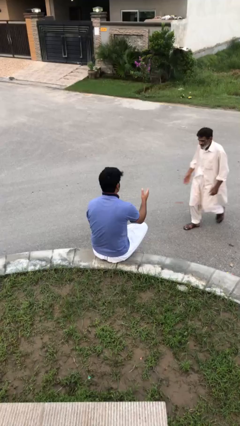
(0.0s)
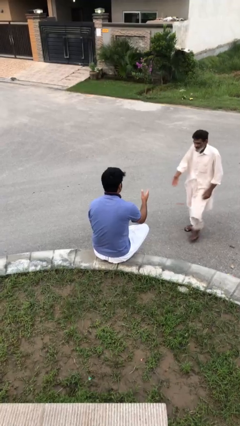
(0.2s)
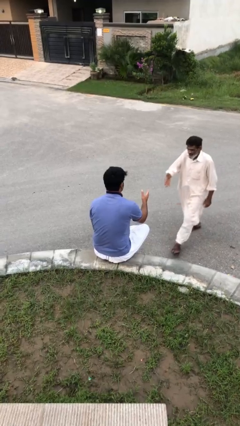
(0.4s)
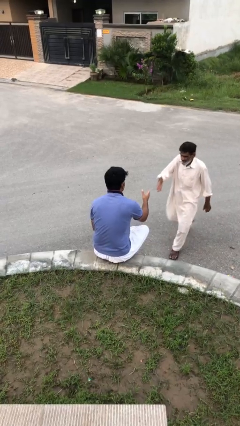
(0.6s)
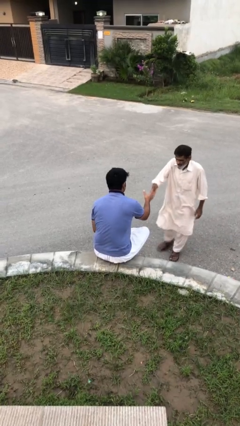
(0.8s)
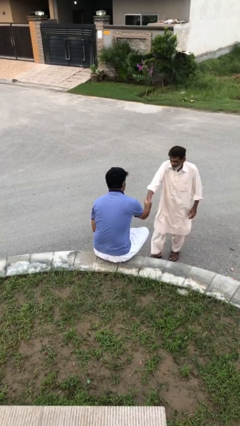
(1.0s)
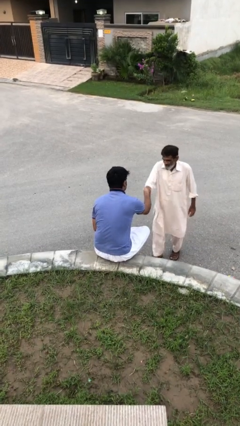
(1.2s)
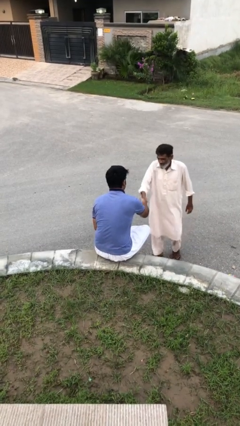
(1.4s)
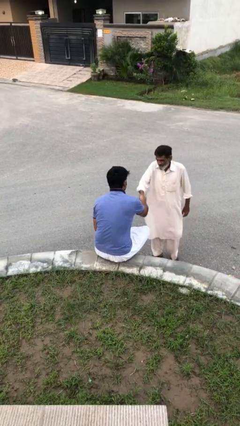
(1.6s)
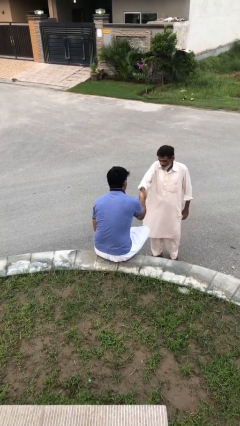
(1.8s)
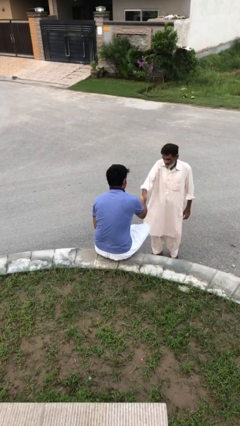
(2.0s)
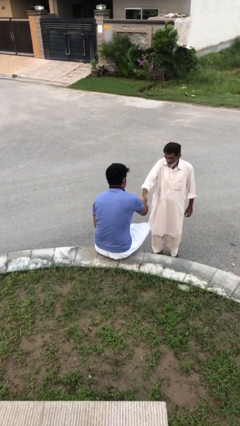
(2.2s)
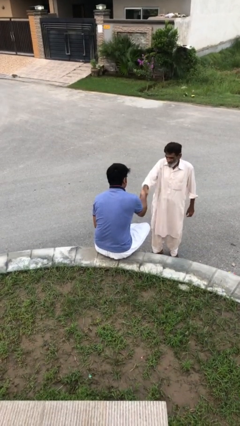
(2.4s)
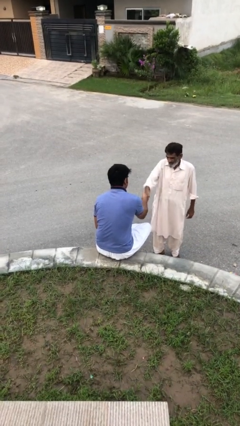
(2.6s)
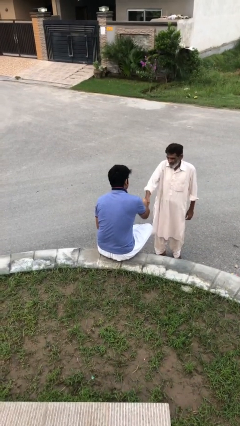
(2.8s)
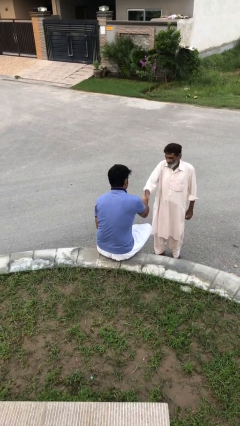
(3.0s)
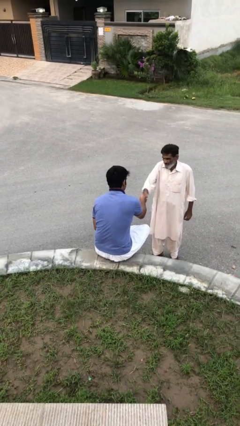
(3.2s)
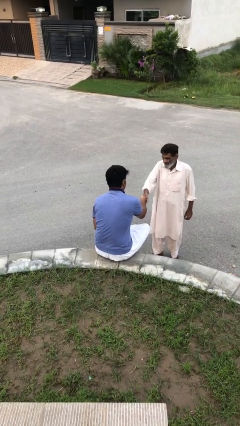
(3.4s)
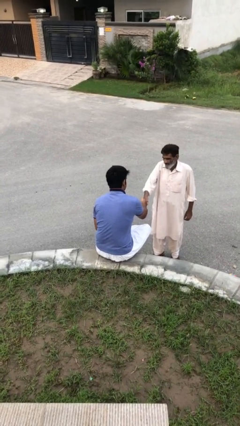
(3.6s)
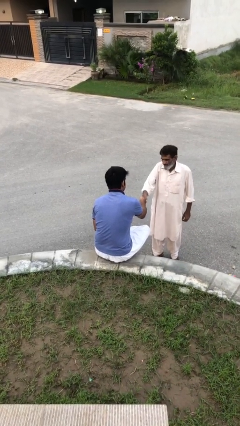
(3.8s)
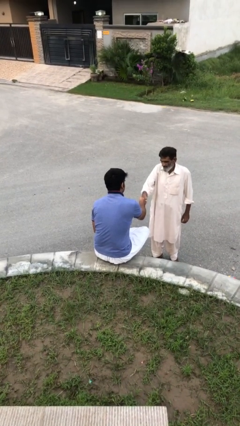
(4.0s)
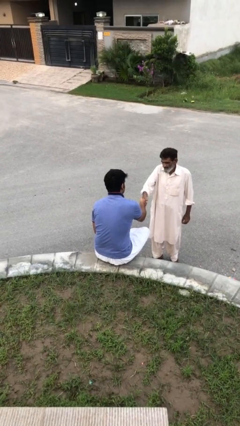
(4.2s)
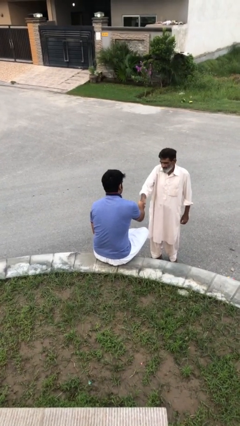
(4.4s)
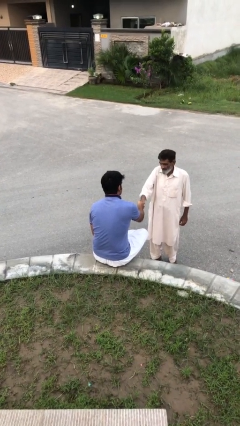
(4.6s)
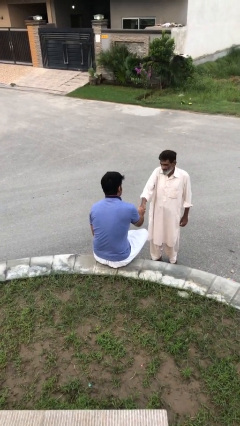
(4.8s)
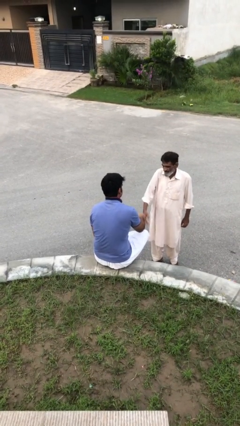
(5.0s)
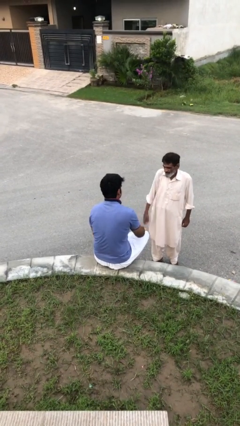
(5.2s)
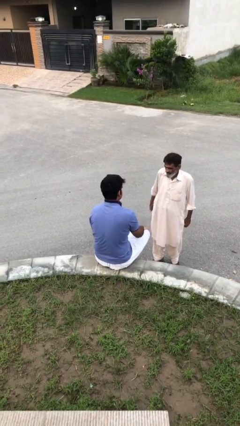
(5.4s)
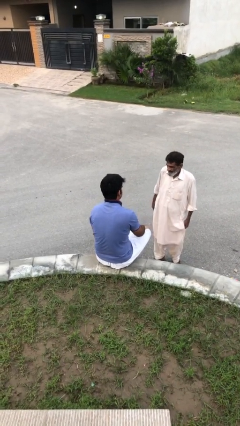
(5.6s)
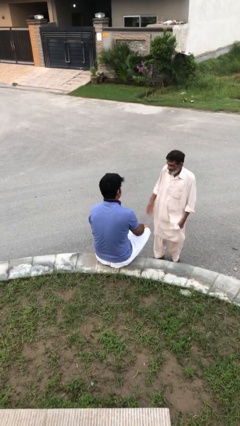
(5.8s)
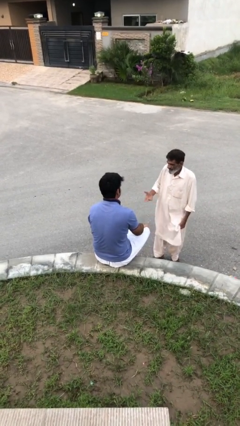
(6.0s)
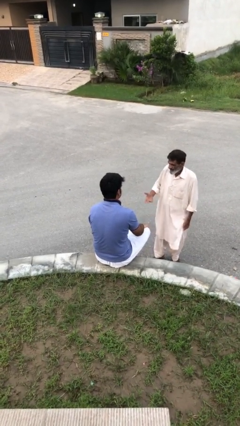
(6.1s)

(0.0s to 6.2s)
person shakes hand

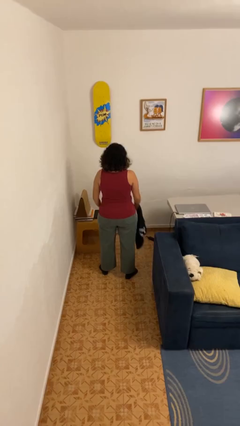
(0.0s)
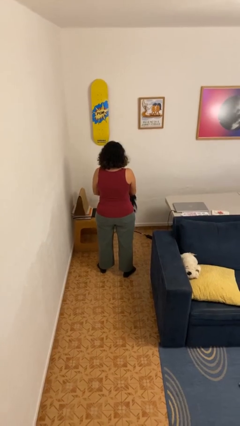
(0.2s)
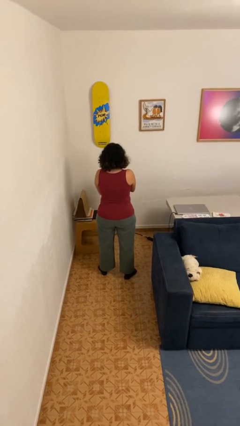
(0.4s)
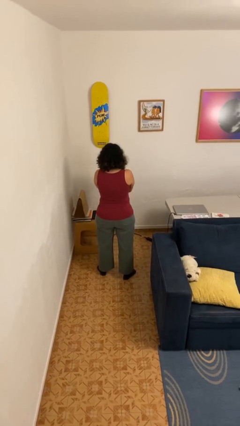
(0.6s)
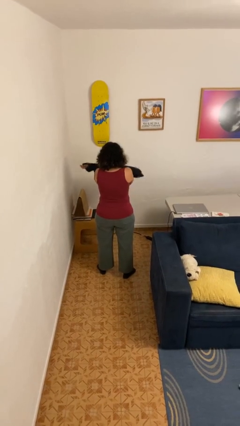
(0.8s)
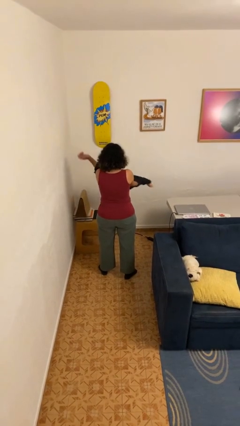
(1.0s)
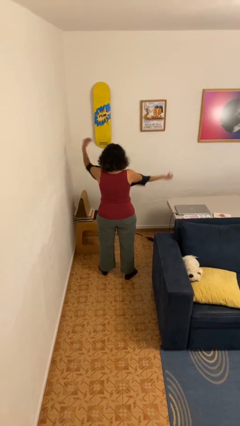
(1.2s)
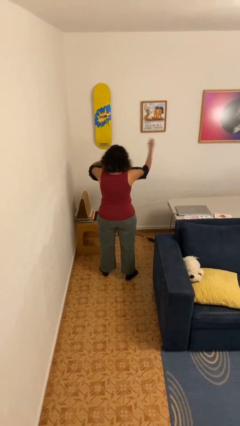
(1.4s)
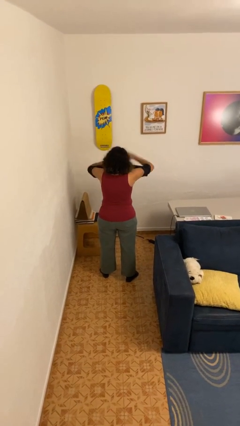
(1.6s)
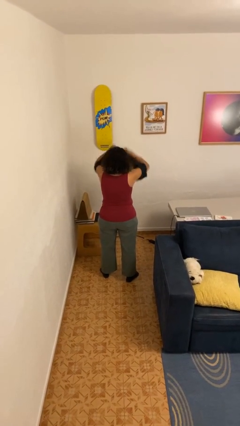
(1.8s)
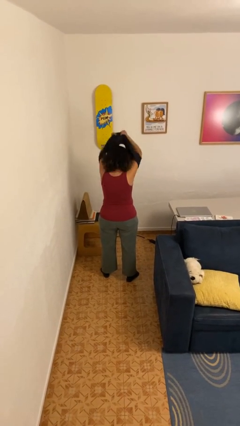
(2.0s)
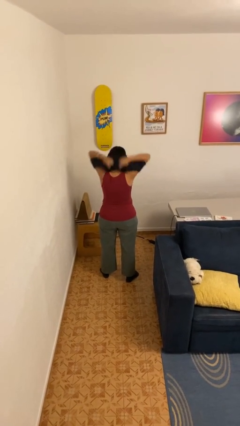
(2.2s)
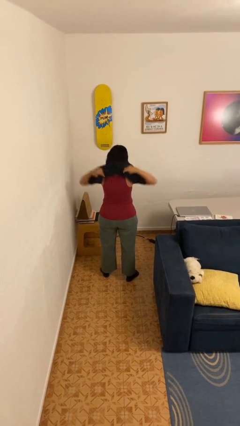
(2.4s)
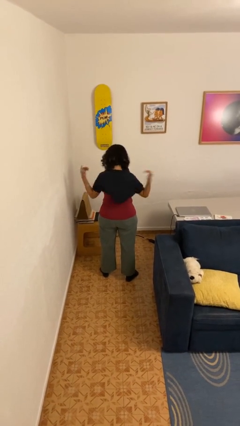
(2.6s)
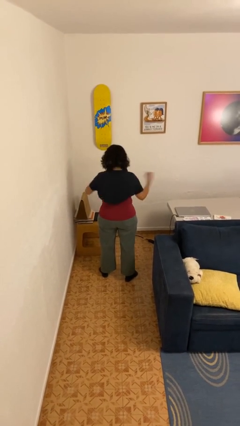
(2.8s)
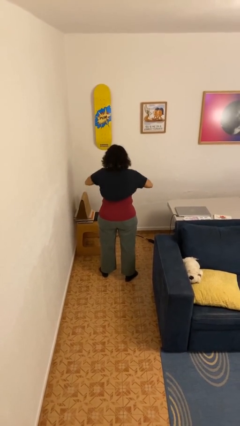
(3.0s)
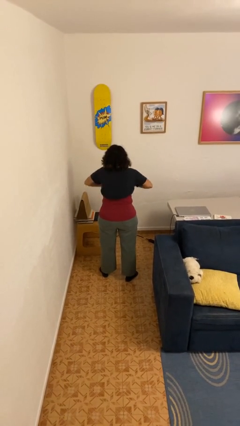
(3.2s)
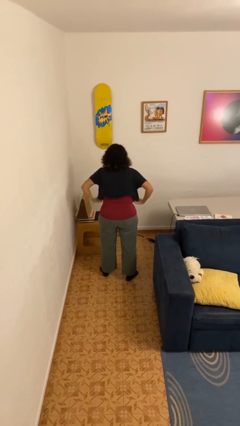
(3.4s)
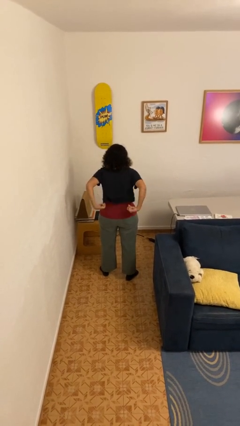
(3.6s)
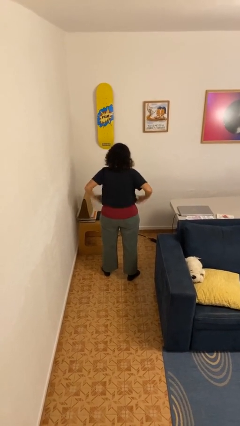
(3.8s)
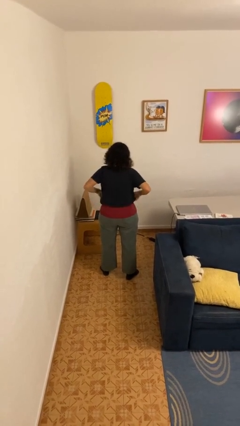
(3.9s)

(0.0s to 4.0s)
person puts on shirt

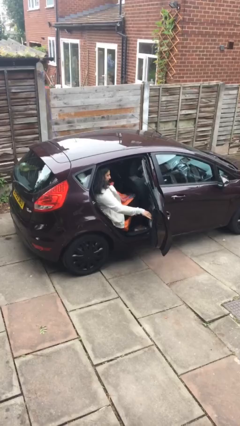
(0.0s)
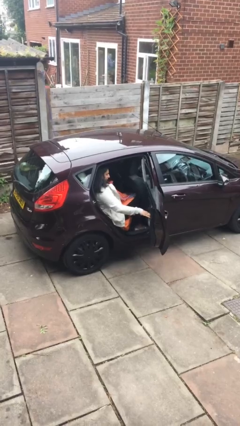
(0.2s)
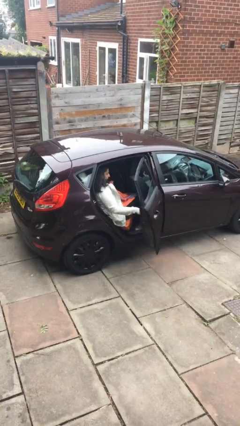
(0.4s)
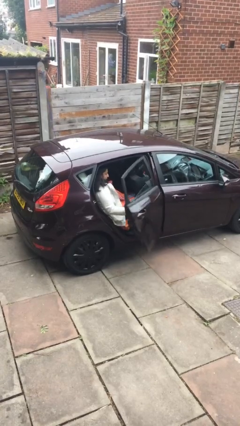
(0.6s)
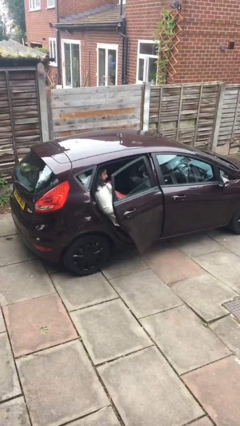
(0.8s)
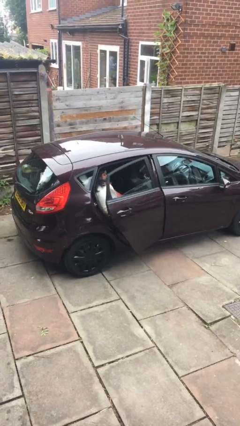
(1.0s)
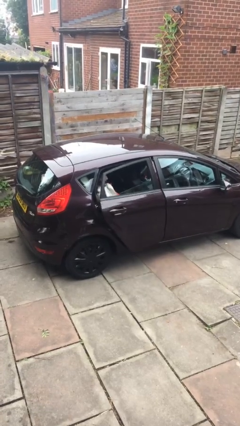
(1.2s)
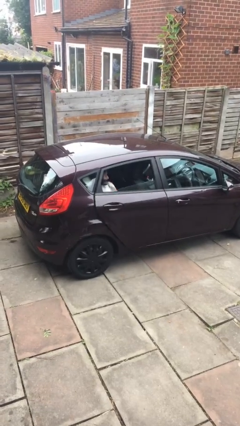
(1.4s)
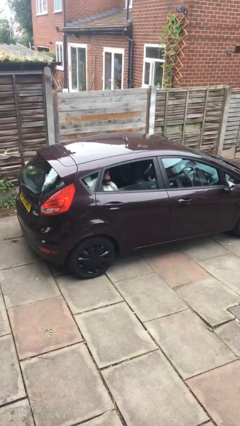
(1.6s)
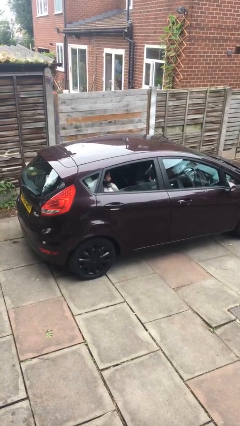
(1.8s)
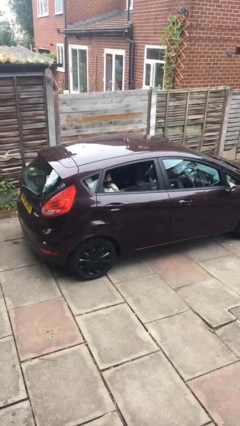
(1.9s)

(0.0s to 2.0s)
person closes car door

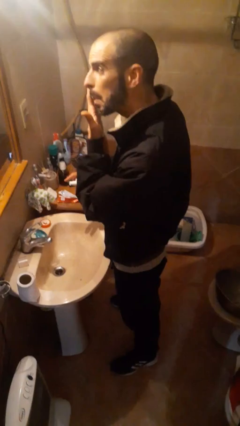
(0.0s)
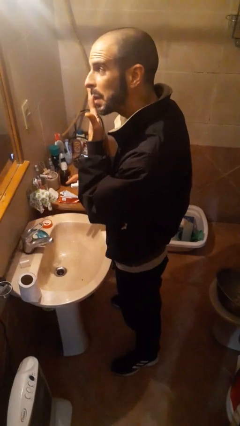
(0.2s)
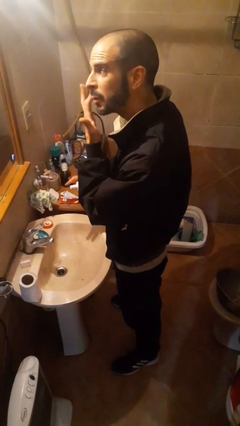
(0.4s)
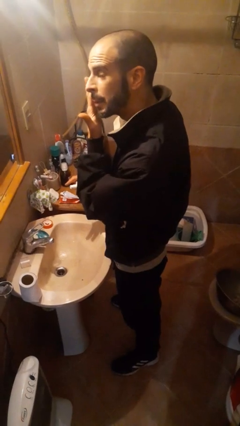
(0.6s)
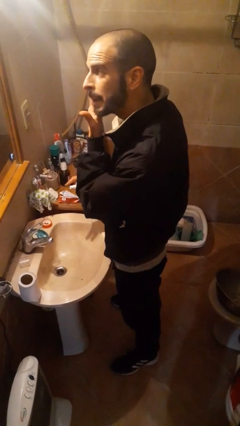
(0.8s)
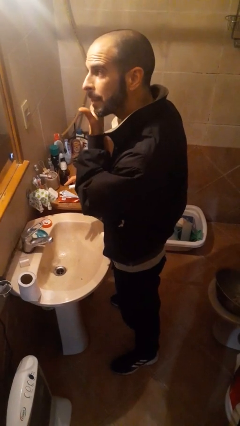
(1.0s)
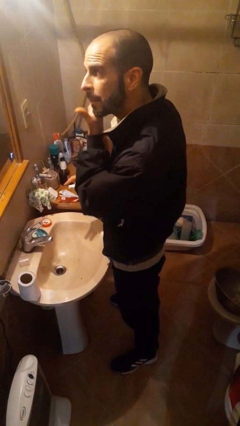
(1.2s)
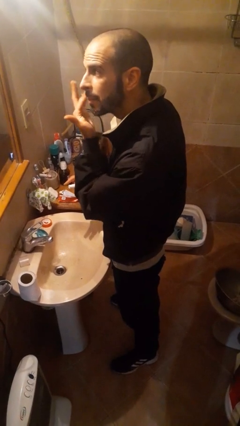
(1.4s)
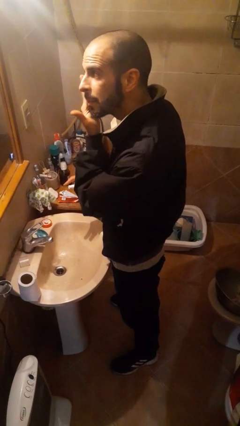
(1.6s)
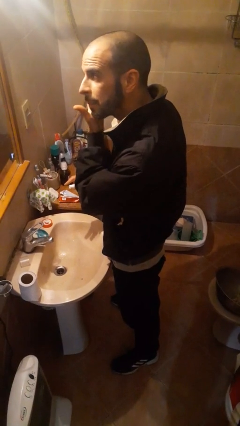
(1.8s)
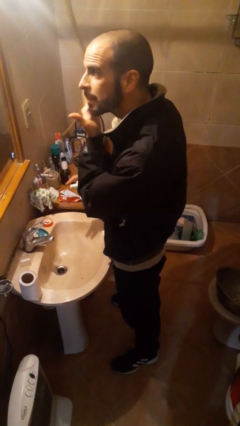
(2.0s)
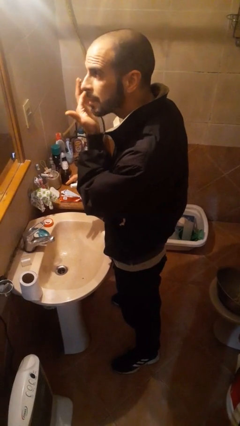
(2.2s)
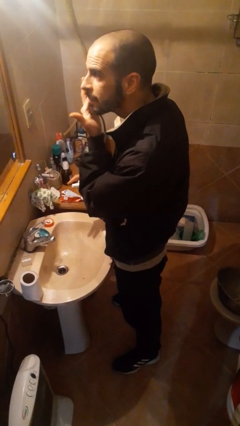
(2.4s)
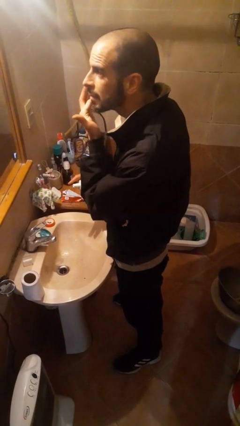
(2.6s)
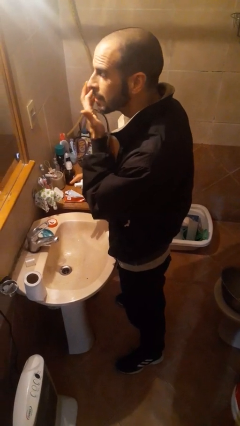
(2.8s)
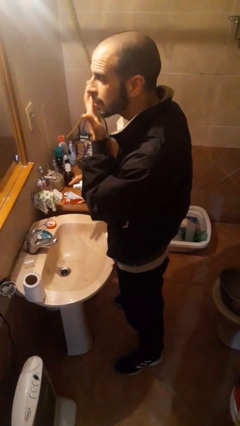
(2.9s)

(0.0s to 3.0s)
person applies foundation makeup

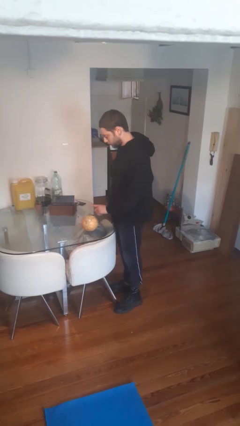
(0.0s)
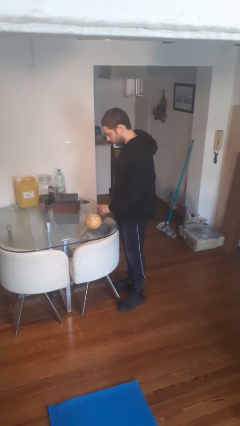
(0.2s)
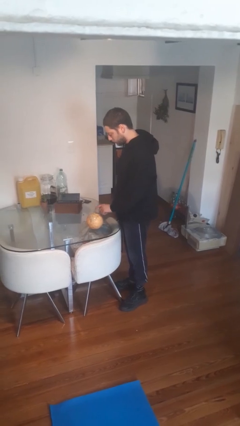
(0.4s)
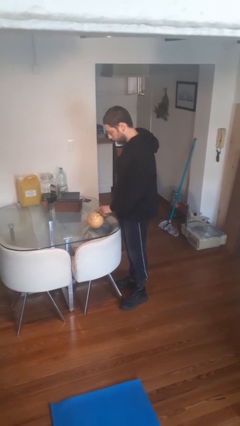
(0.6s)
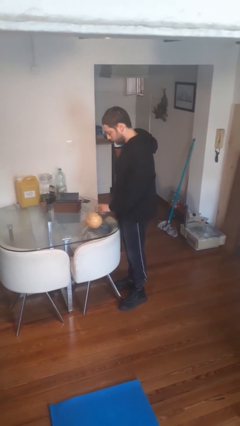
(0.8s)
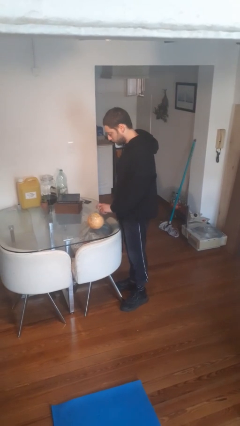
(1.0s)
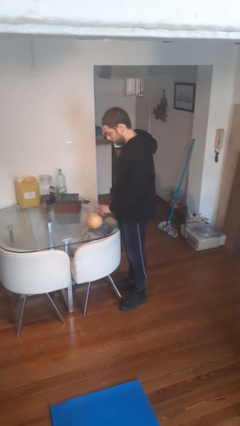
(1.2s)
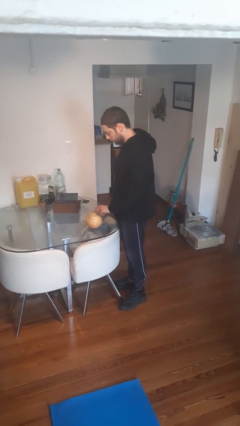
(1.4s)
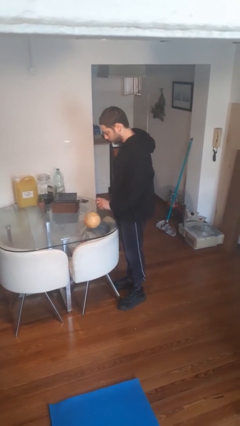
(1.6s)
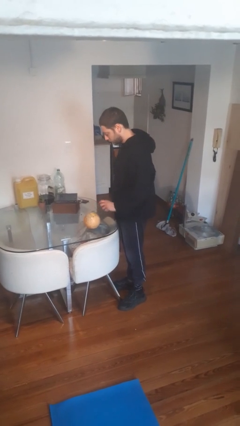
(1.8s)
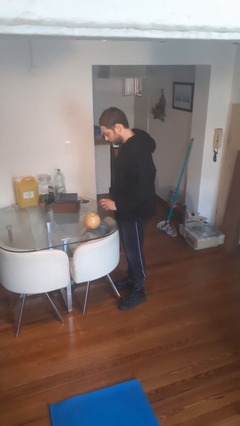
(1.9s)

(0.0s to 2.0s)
person taps object with finger

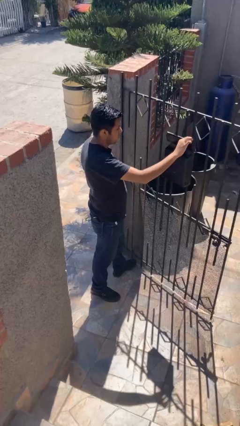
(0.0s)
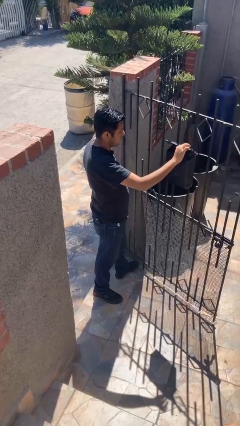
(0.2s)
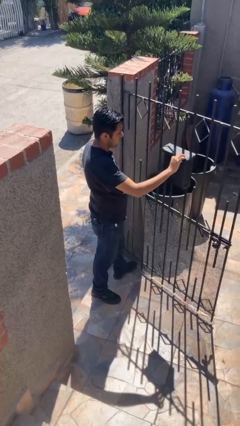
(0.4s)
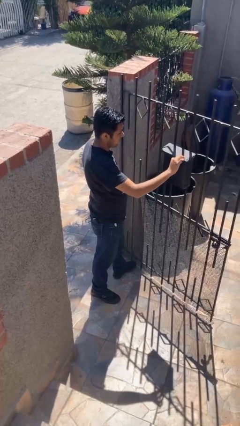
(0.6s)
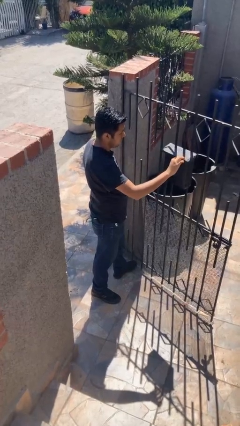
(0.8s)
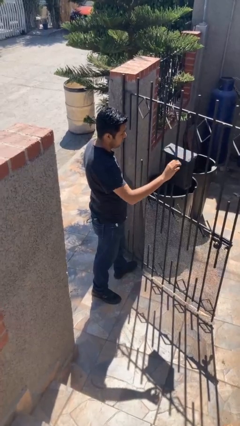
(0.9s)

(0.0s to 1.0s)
person closes mailbox
